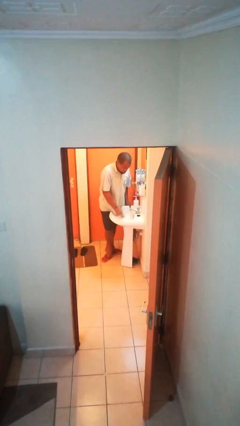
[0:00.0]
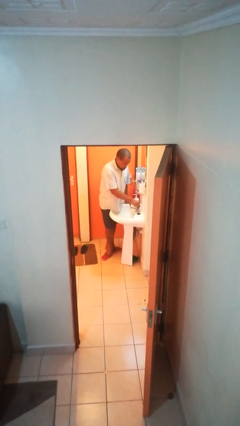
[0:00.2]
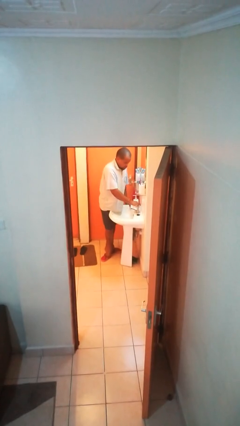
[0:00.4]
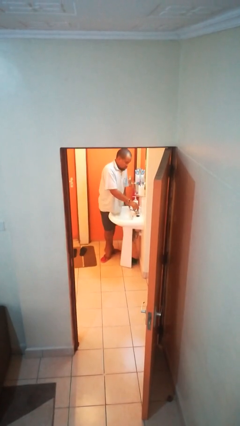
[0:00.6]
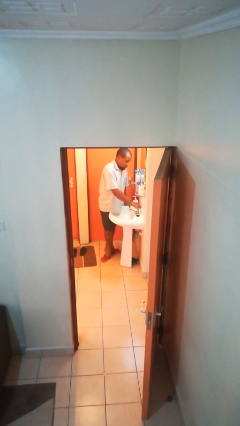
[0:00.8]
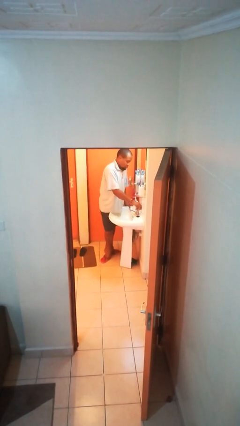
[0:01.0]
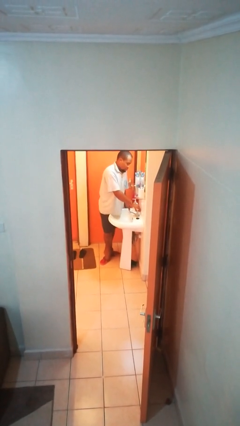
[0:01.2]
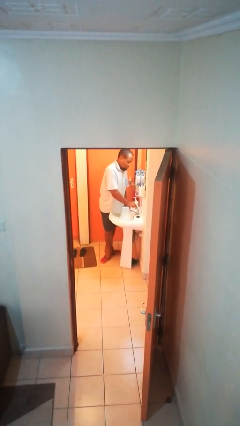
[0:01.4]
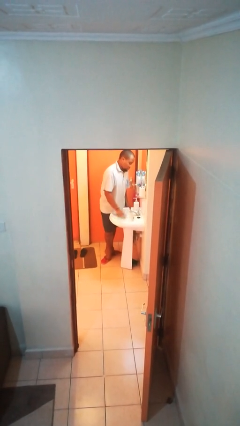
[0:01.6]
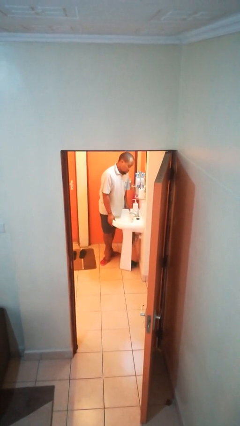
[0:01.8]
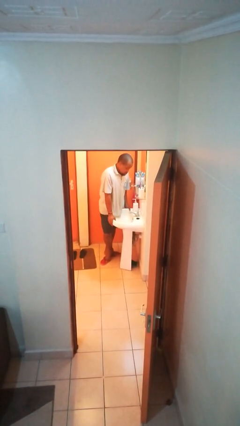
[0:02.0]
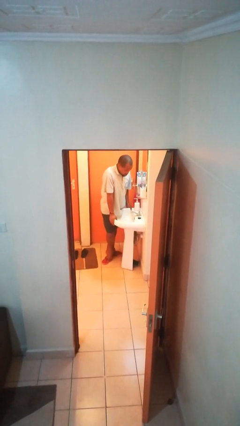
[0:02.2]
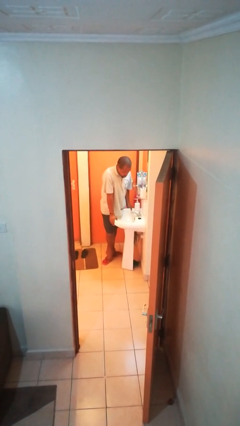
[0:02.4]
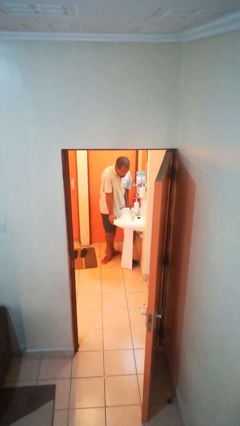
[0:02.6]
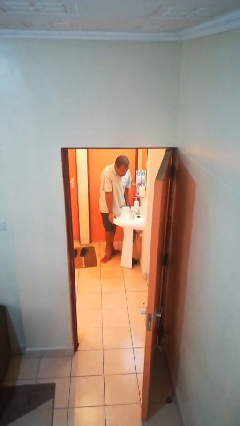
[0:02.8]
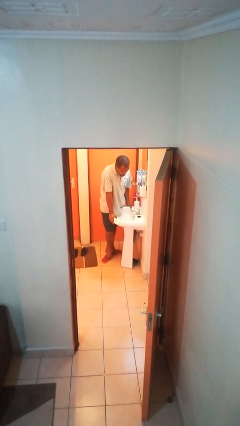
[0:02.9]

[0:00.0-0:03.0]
person turns on faucet

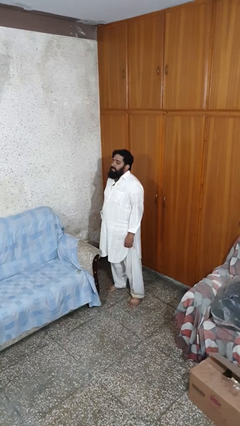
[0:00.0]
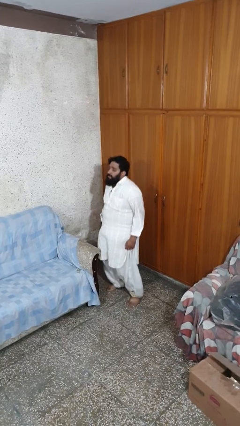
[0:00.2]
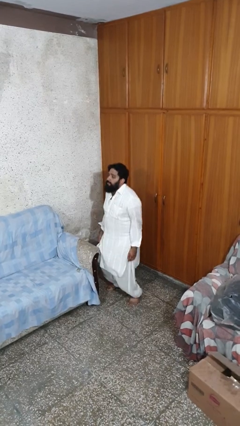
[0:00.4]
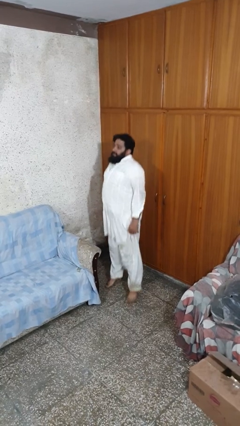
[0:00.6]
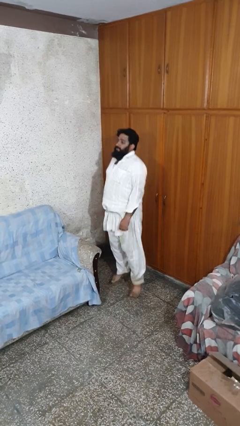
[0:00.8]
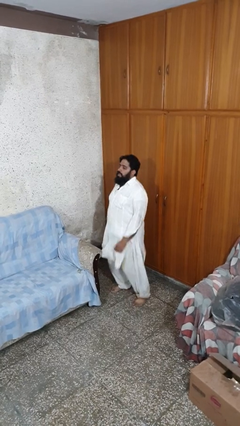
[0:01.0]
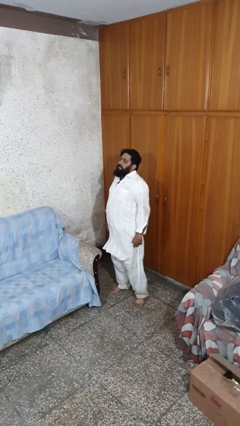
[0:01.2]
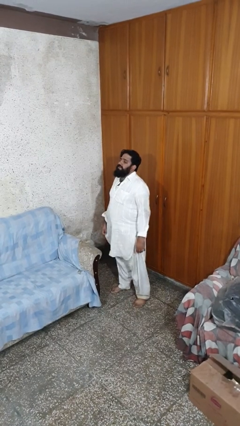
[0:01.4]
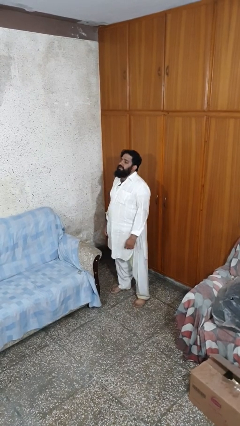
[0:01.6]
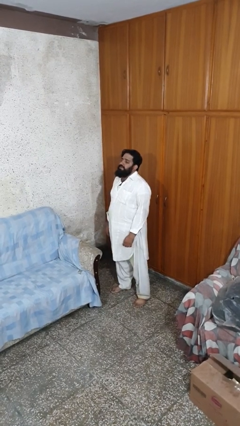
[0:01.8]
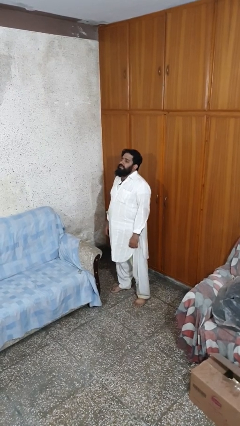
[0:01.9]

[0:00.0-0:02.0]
person jumps

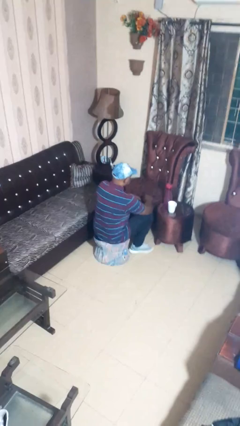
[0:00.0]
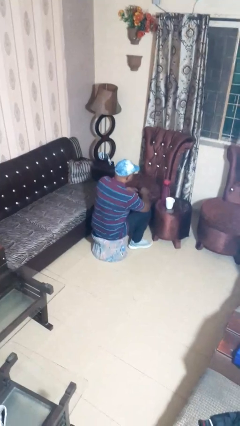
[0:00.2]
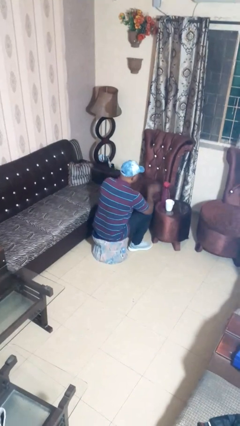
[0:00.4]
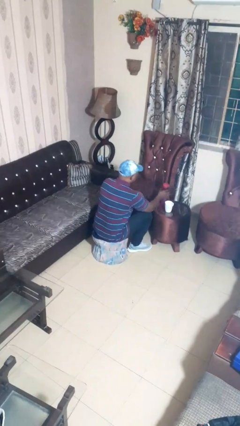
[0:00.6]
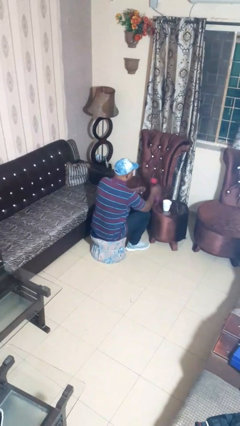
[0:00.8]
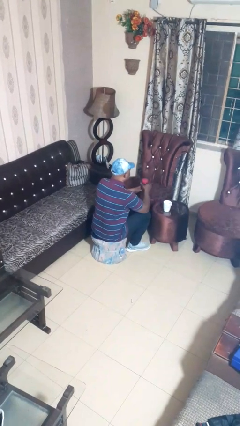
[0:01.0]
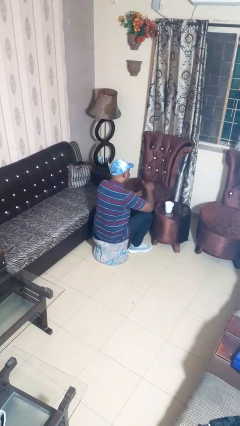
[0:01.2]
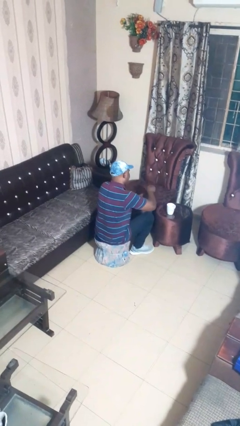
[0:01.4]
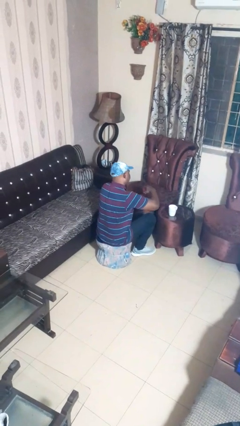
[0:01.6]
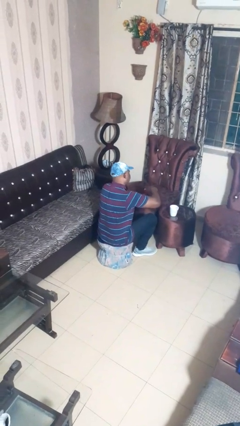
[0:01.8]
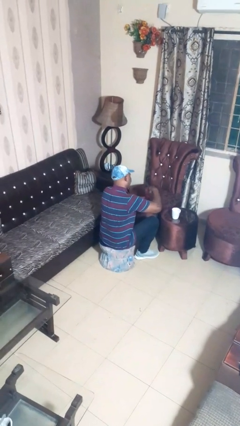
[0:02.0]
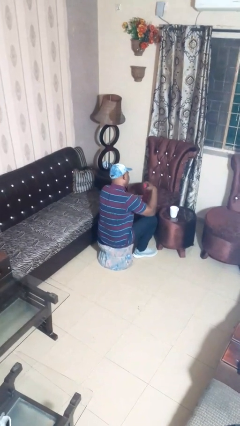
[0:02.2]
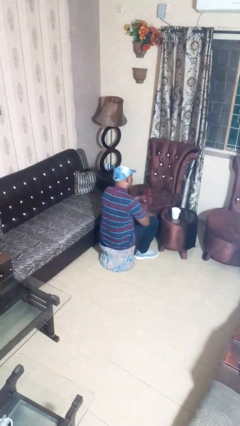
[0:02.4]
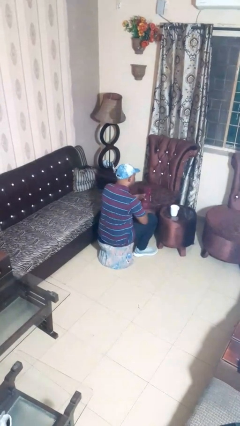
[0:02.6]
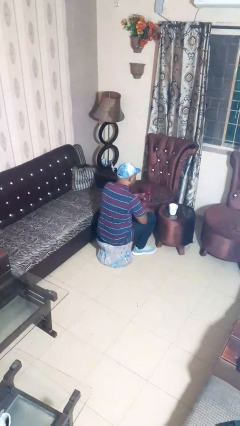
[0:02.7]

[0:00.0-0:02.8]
person unscrews lid from bottle

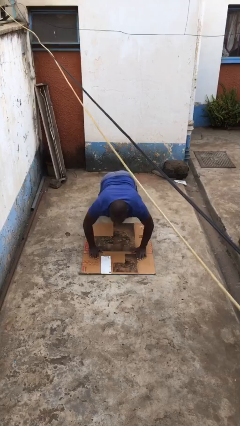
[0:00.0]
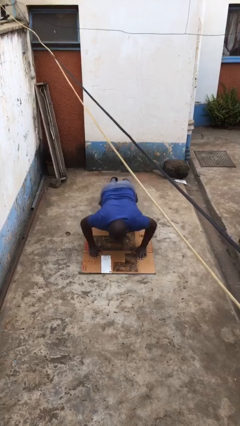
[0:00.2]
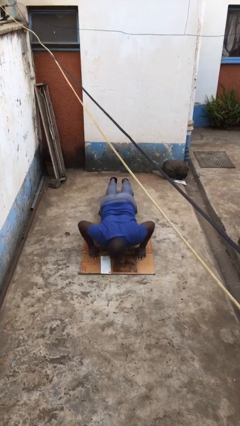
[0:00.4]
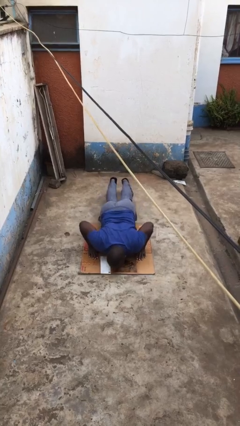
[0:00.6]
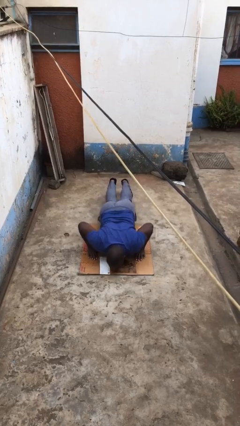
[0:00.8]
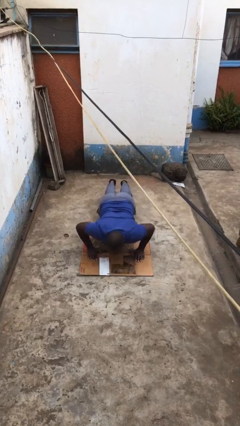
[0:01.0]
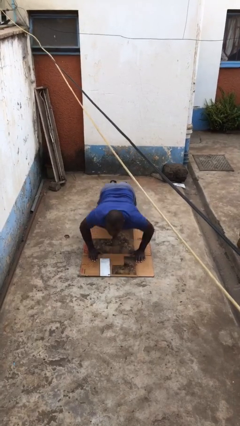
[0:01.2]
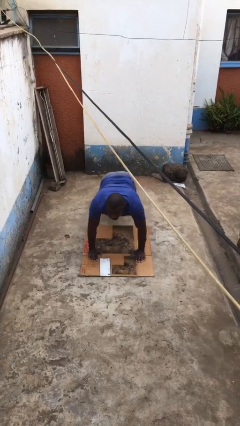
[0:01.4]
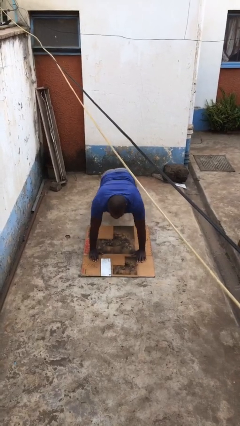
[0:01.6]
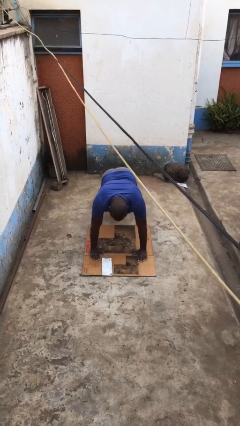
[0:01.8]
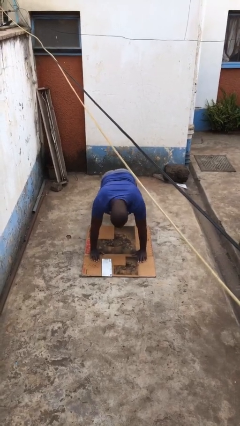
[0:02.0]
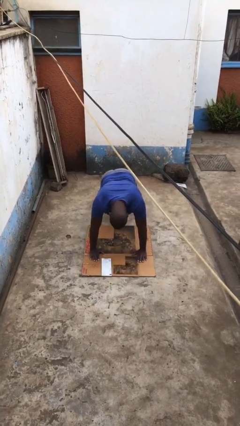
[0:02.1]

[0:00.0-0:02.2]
person exercises with pushup

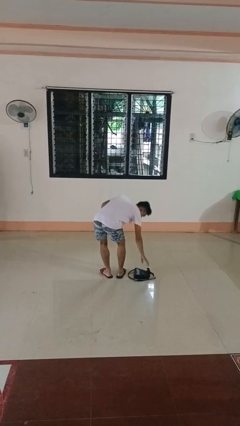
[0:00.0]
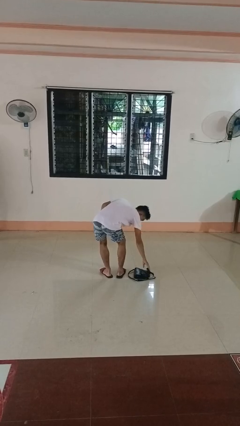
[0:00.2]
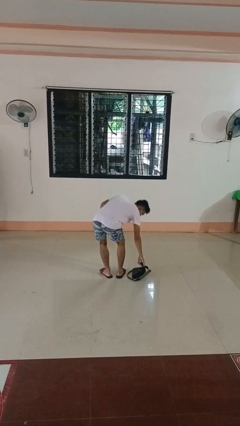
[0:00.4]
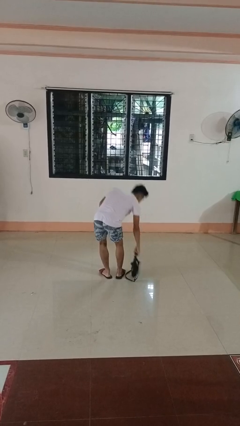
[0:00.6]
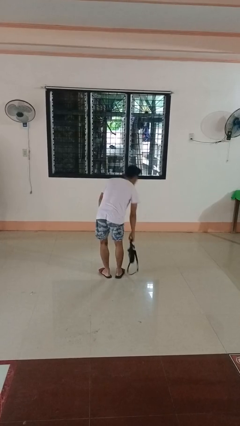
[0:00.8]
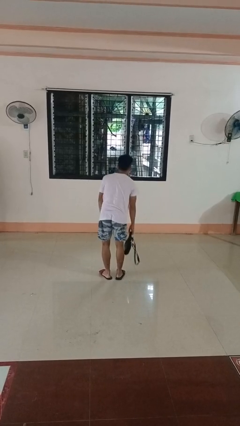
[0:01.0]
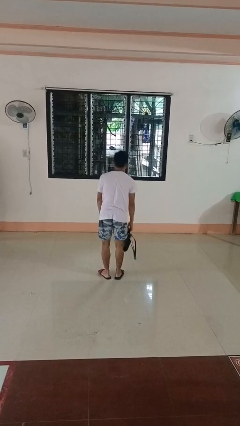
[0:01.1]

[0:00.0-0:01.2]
person picks up object from floor

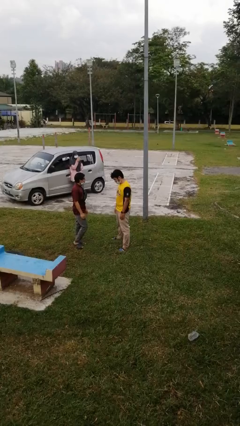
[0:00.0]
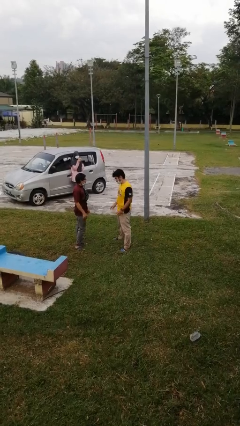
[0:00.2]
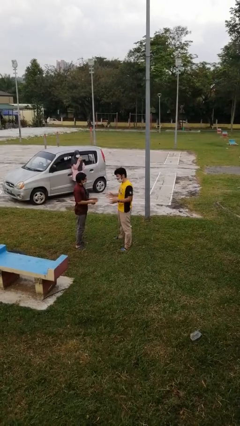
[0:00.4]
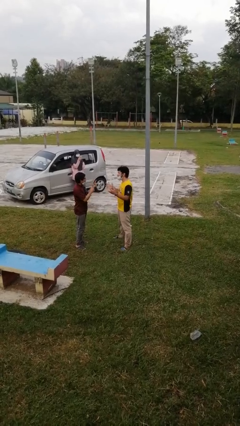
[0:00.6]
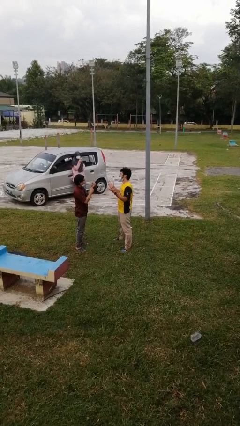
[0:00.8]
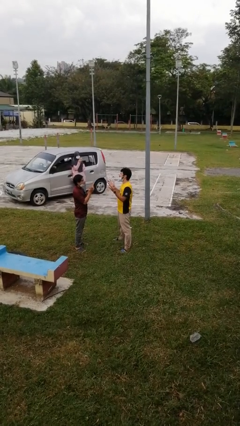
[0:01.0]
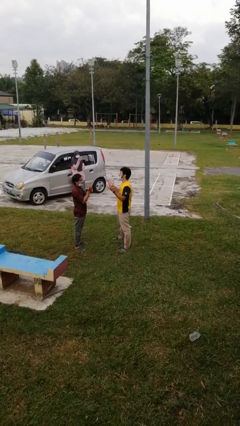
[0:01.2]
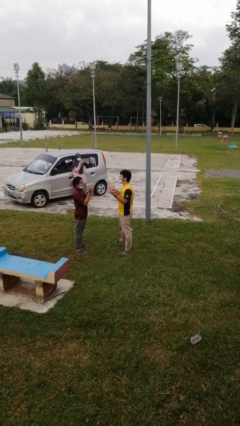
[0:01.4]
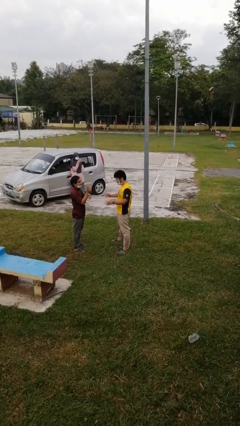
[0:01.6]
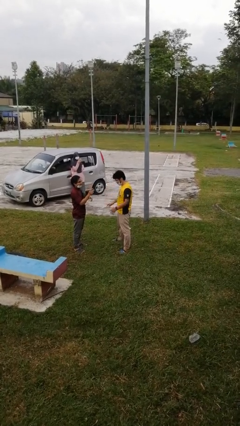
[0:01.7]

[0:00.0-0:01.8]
person talks to person

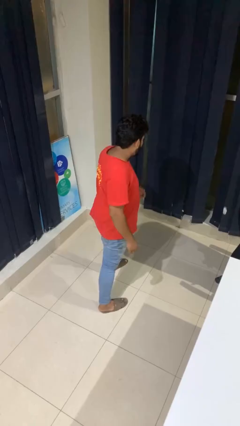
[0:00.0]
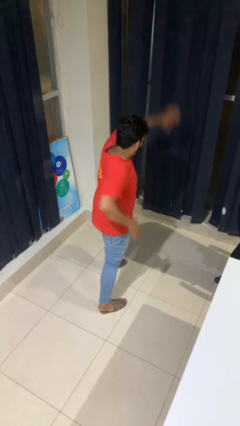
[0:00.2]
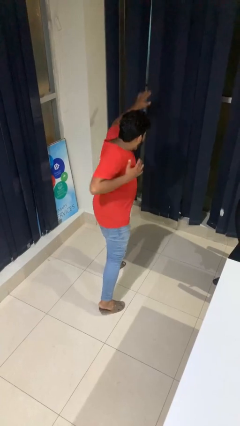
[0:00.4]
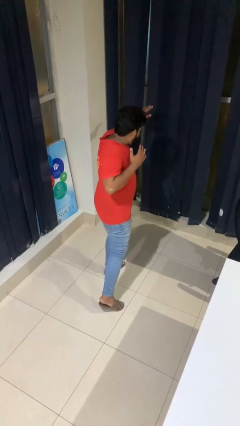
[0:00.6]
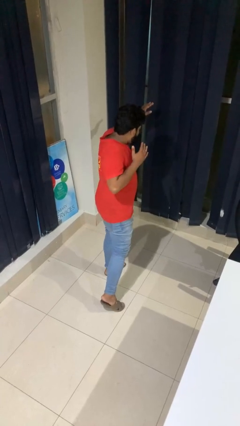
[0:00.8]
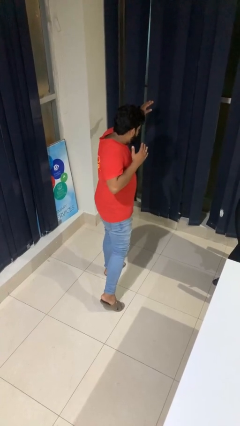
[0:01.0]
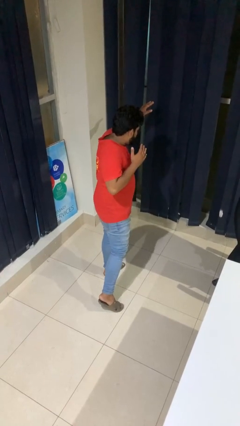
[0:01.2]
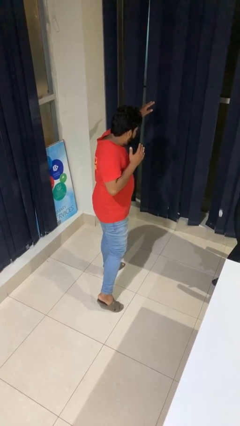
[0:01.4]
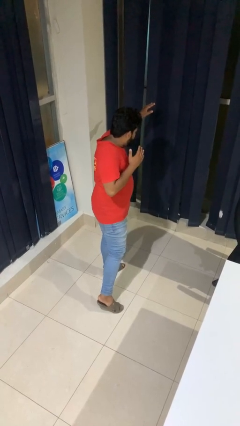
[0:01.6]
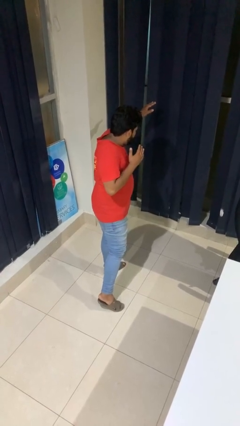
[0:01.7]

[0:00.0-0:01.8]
person karate chop

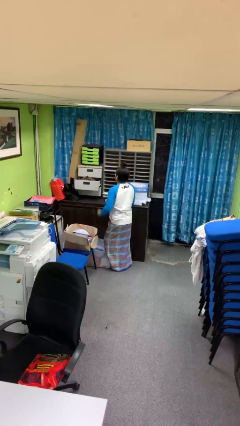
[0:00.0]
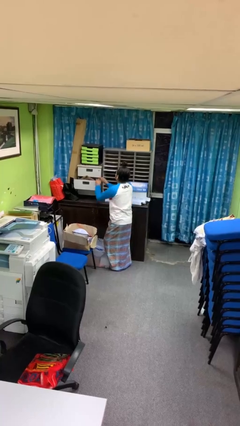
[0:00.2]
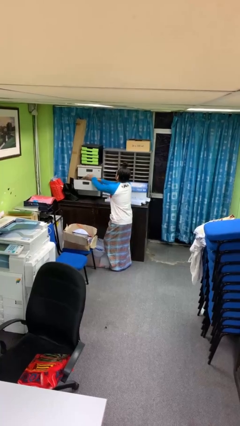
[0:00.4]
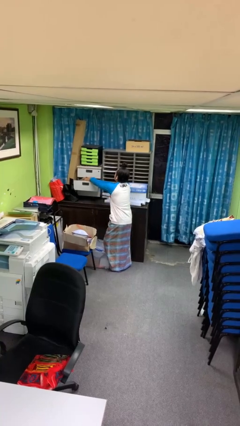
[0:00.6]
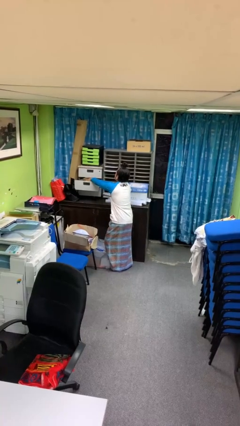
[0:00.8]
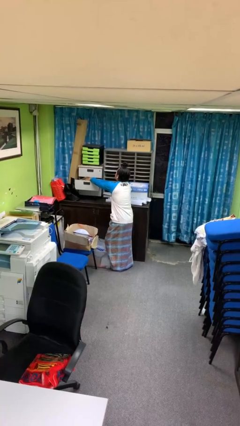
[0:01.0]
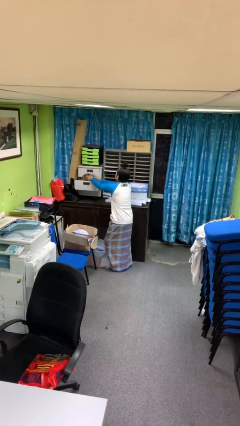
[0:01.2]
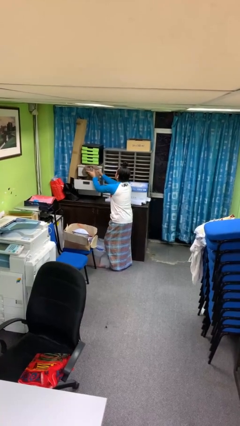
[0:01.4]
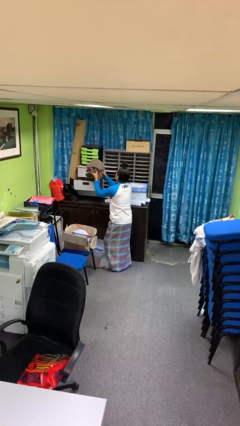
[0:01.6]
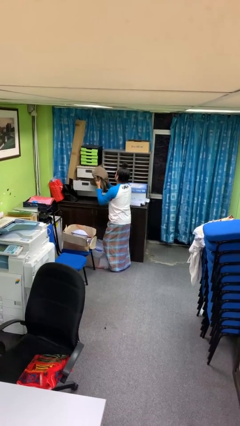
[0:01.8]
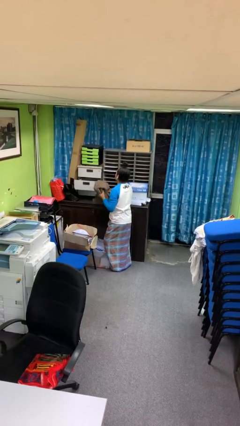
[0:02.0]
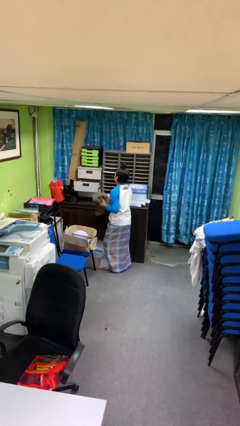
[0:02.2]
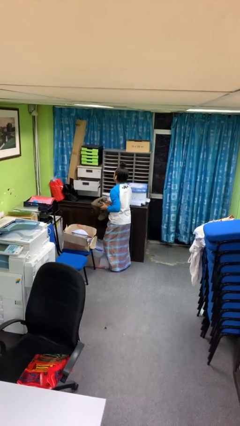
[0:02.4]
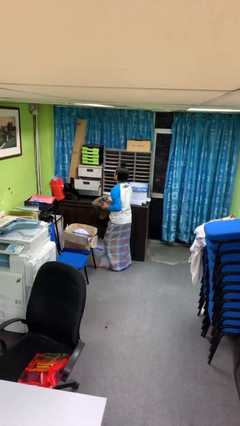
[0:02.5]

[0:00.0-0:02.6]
person takes clothes from dresser
